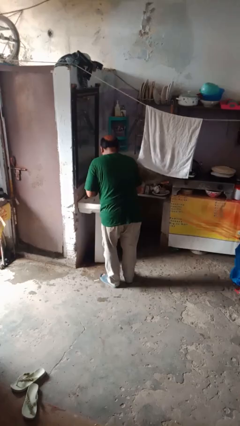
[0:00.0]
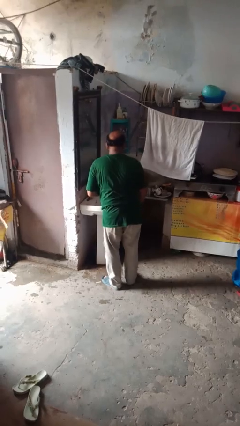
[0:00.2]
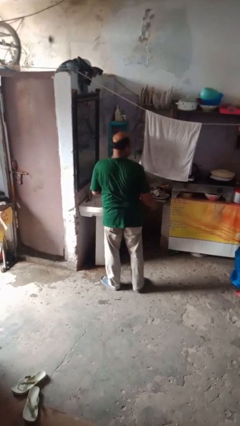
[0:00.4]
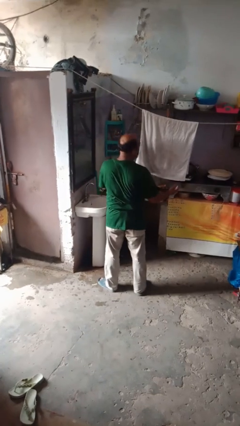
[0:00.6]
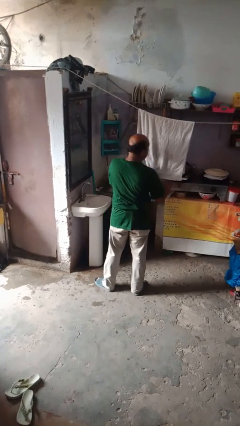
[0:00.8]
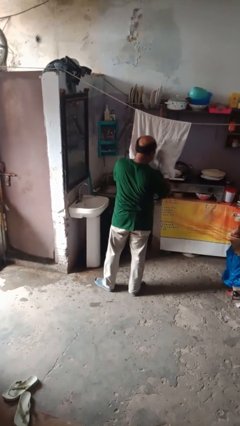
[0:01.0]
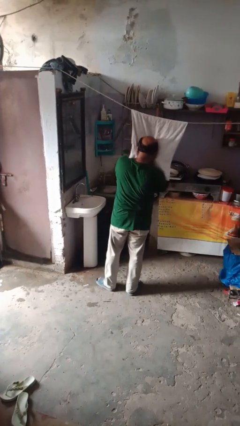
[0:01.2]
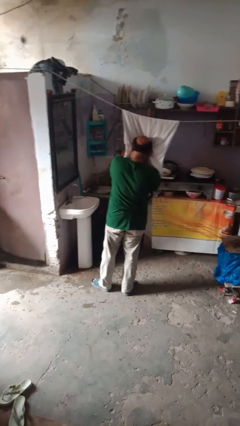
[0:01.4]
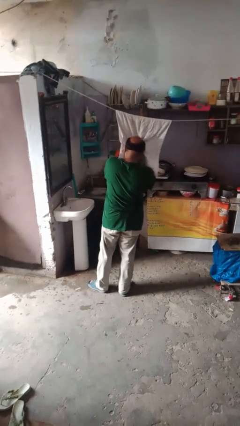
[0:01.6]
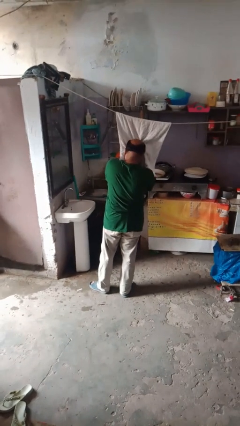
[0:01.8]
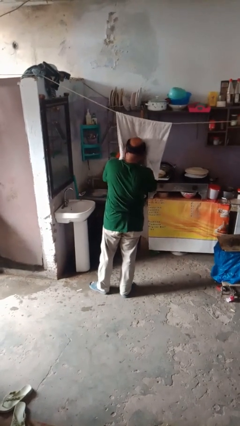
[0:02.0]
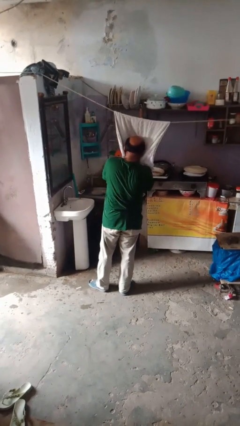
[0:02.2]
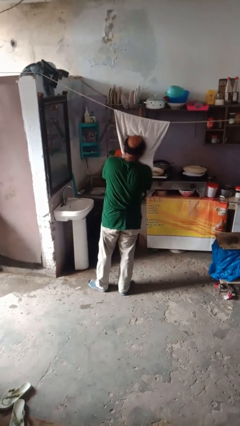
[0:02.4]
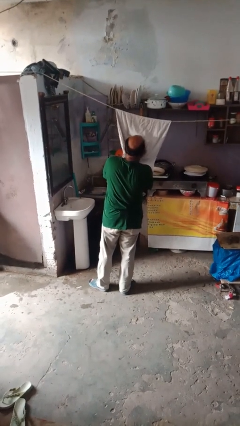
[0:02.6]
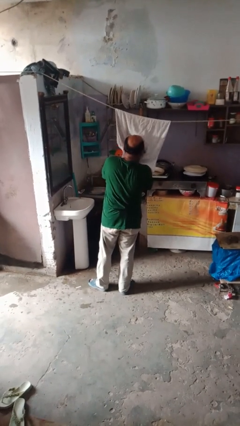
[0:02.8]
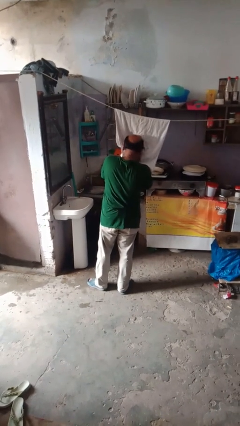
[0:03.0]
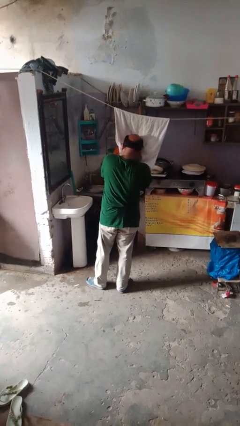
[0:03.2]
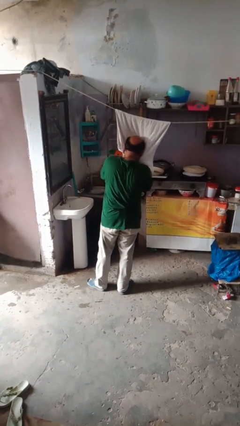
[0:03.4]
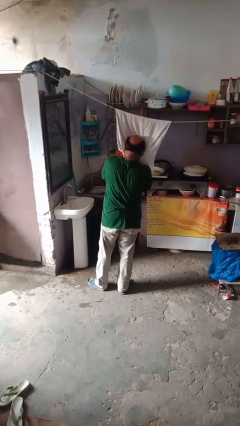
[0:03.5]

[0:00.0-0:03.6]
person dries face with towel

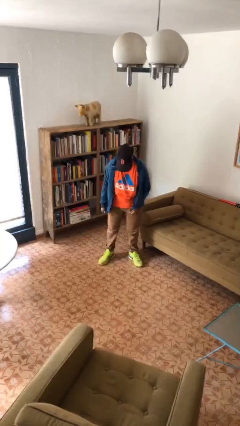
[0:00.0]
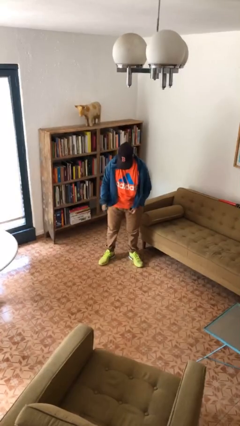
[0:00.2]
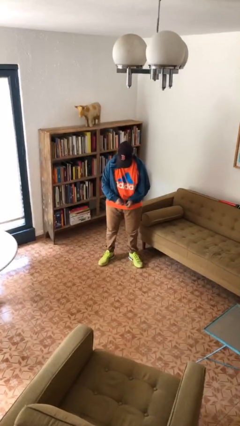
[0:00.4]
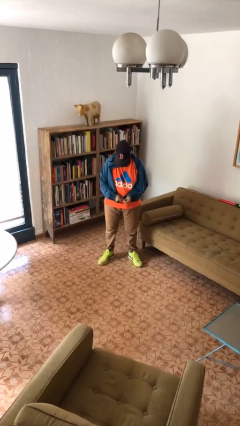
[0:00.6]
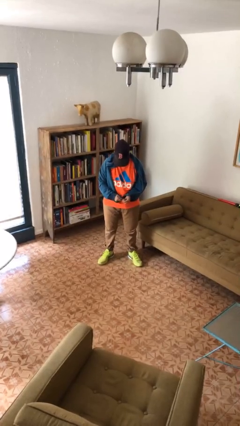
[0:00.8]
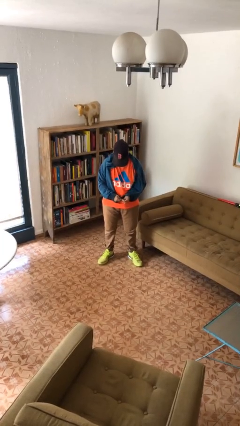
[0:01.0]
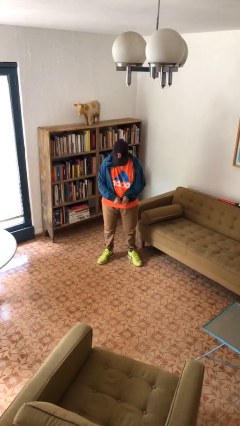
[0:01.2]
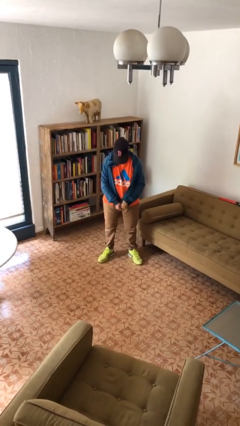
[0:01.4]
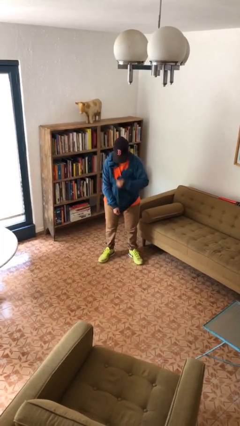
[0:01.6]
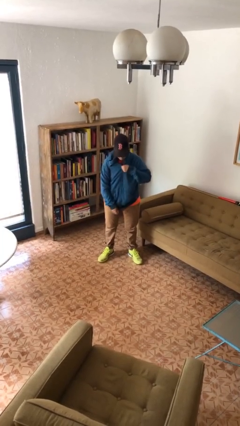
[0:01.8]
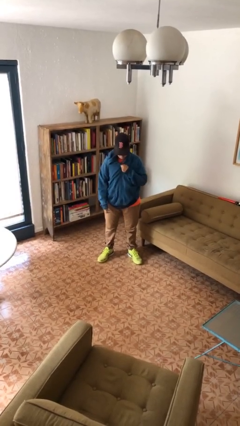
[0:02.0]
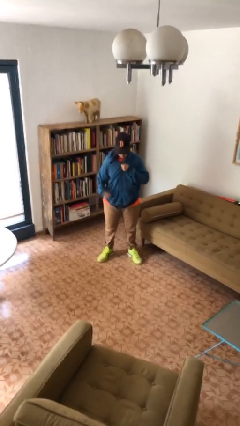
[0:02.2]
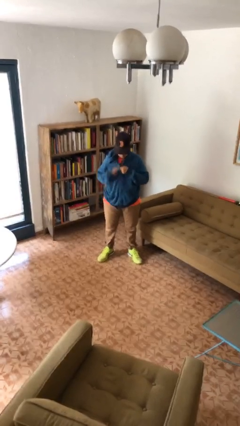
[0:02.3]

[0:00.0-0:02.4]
person zips up jacket

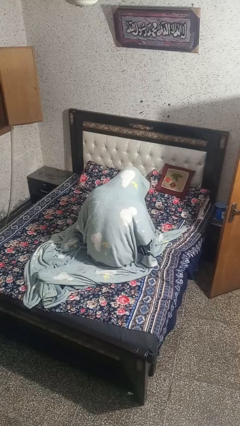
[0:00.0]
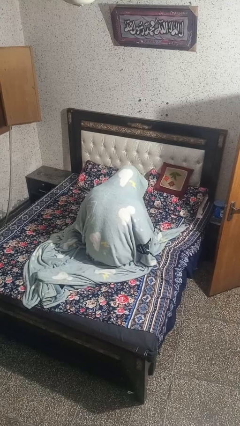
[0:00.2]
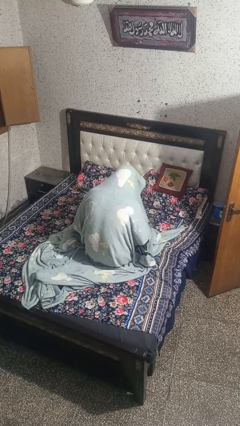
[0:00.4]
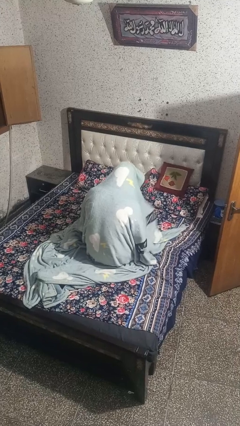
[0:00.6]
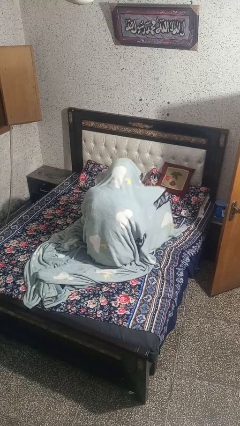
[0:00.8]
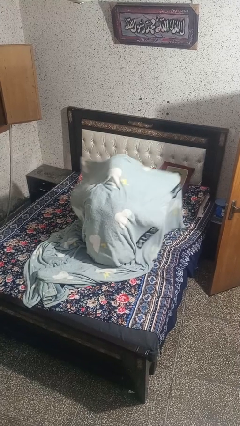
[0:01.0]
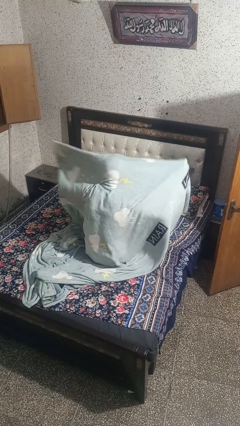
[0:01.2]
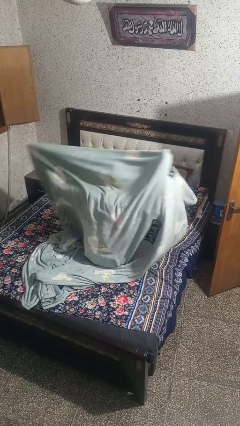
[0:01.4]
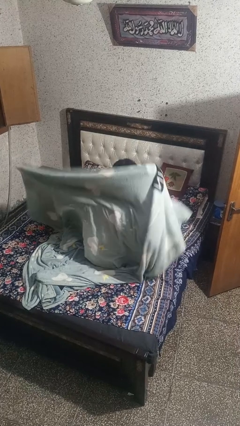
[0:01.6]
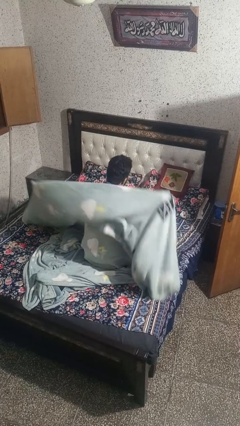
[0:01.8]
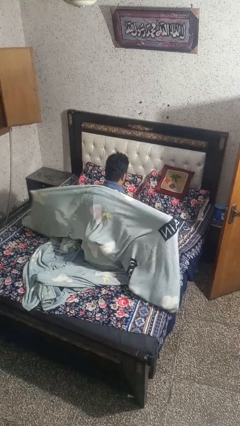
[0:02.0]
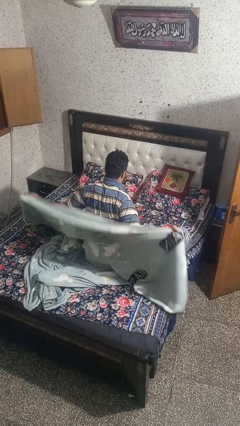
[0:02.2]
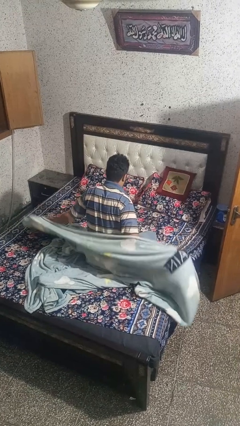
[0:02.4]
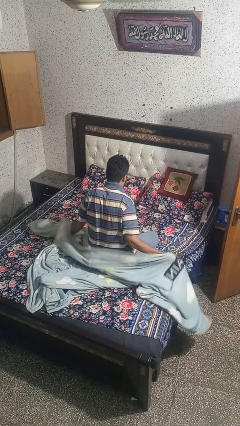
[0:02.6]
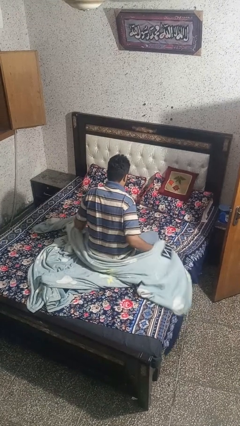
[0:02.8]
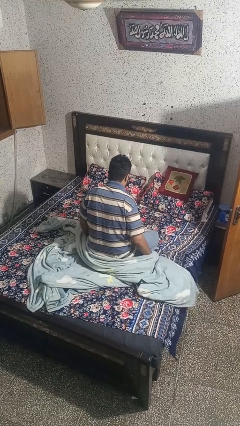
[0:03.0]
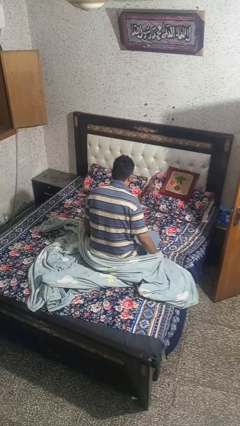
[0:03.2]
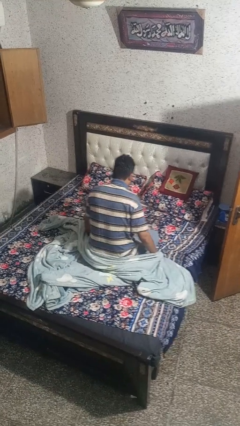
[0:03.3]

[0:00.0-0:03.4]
person uncovers with blanket

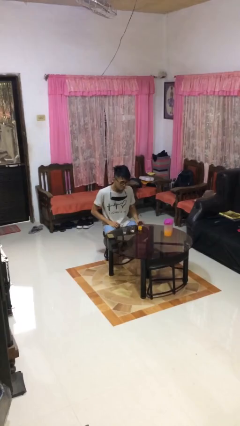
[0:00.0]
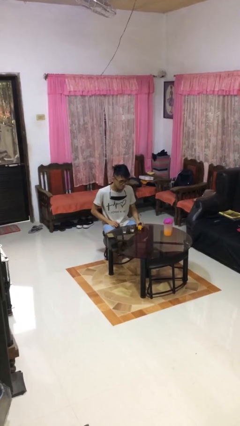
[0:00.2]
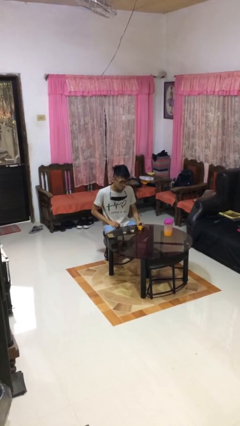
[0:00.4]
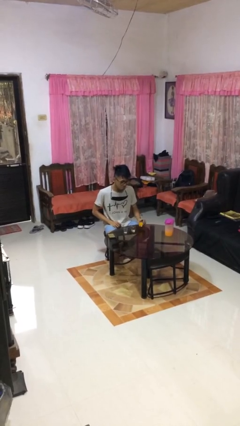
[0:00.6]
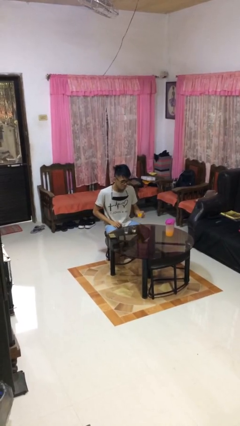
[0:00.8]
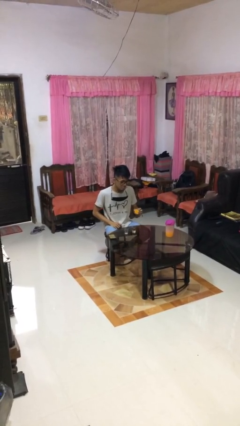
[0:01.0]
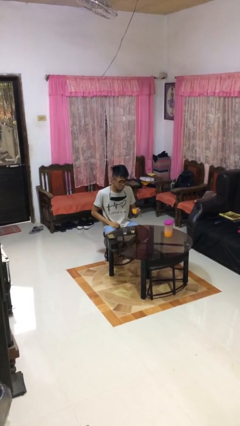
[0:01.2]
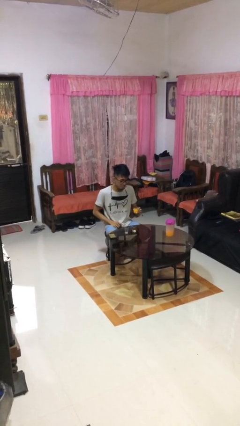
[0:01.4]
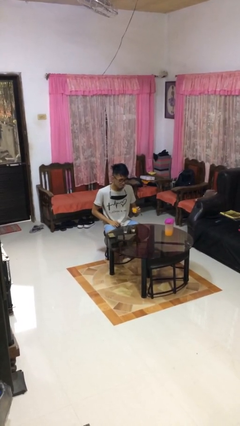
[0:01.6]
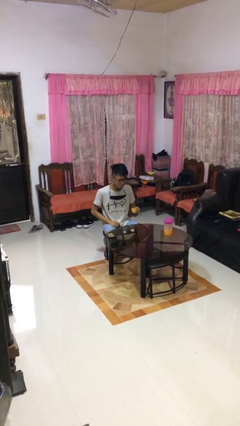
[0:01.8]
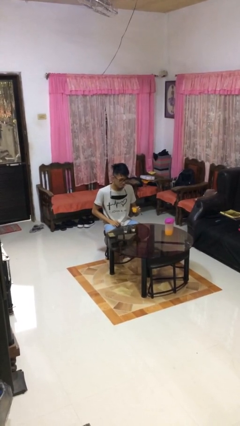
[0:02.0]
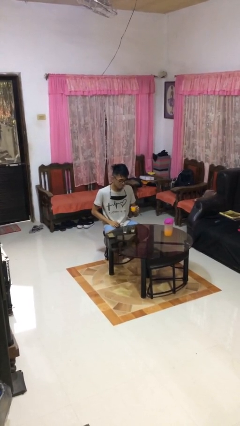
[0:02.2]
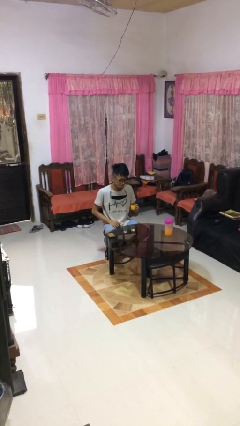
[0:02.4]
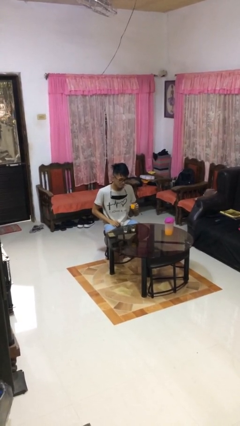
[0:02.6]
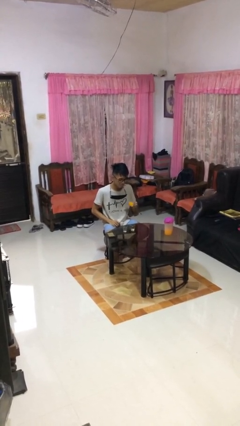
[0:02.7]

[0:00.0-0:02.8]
person picks up object from table

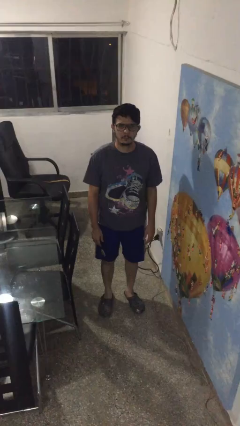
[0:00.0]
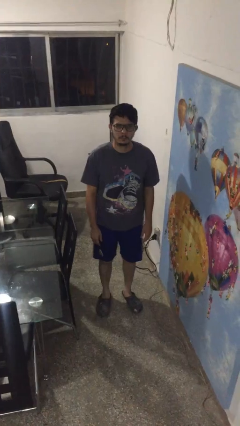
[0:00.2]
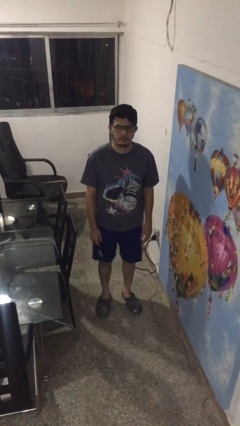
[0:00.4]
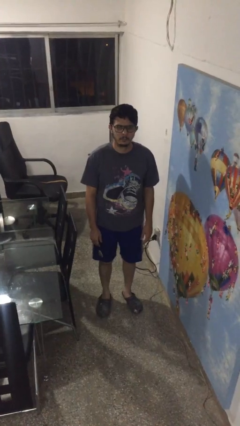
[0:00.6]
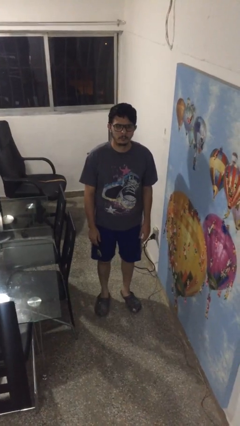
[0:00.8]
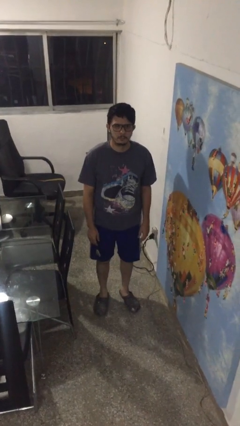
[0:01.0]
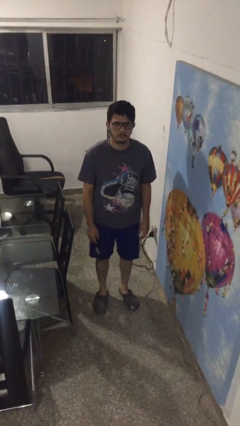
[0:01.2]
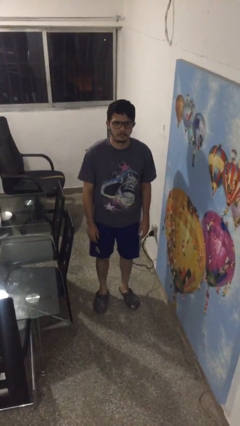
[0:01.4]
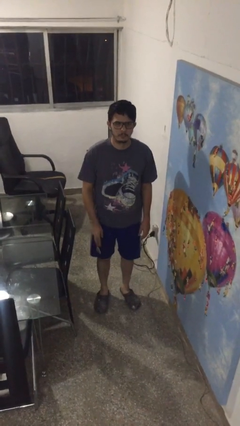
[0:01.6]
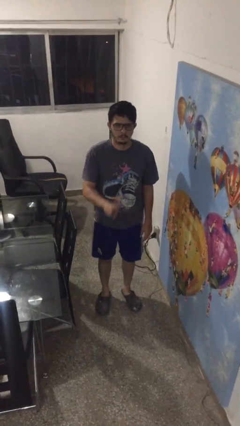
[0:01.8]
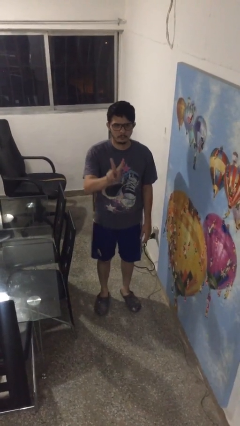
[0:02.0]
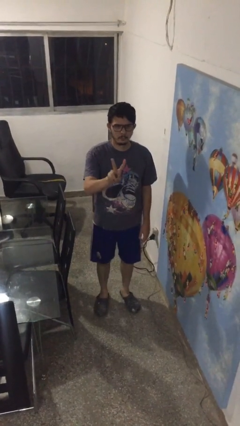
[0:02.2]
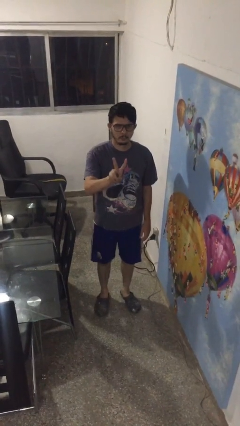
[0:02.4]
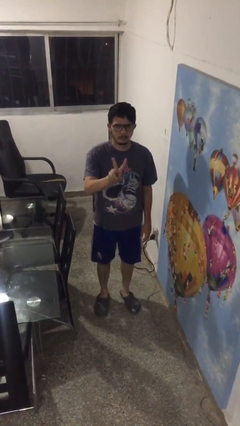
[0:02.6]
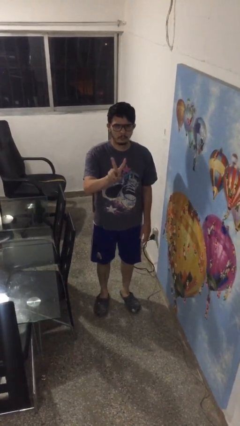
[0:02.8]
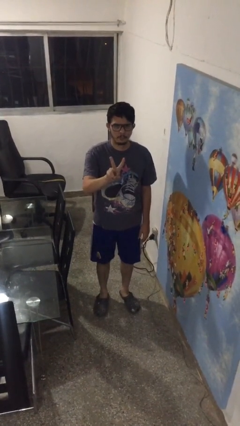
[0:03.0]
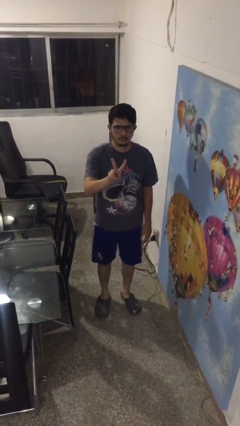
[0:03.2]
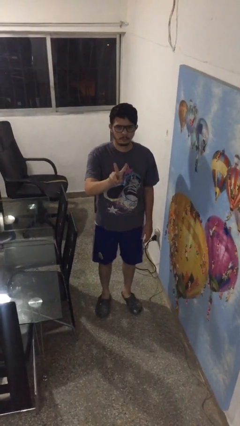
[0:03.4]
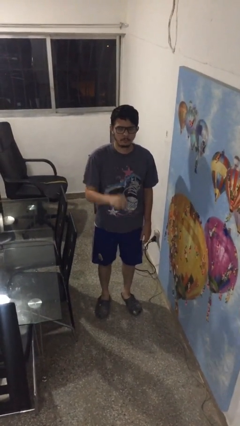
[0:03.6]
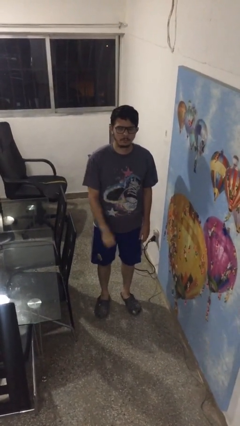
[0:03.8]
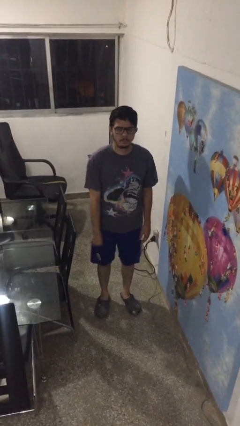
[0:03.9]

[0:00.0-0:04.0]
person gestures peace

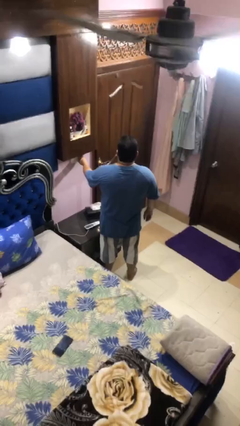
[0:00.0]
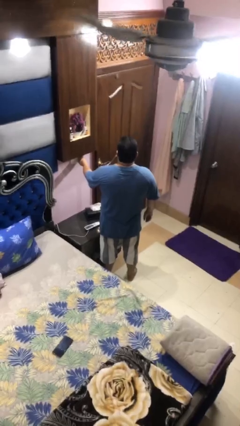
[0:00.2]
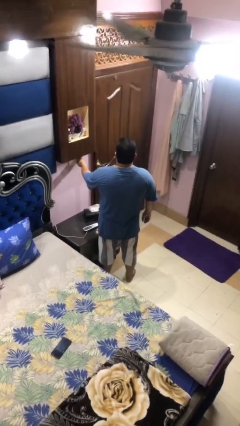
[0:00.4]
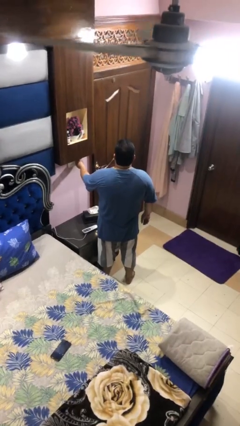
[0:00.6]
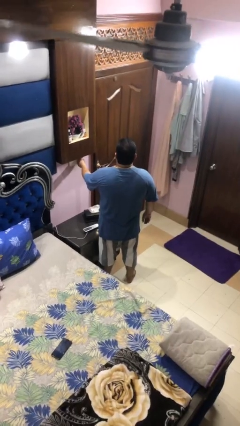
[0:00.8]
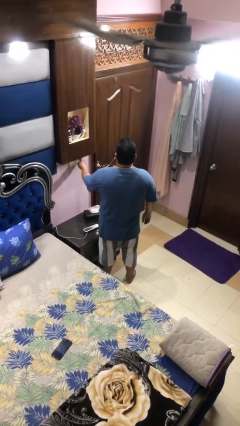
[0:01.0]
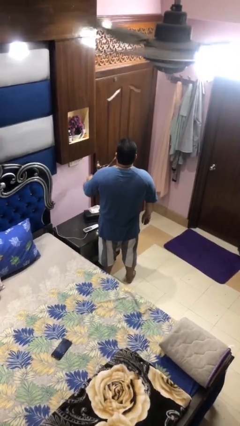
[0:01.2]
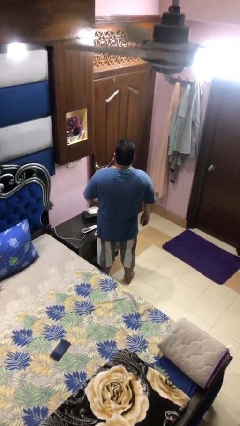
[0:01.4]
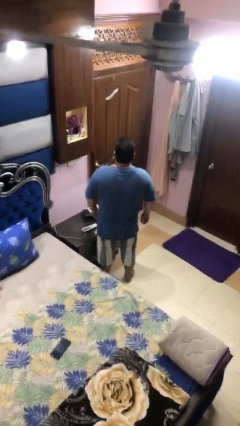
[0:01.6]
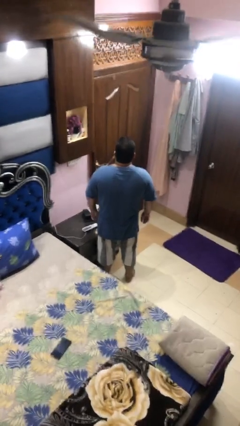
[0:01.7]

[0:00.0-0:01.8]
person turns off fan
